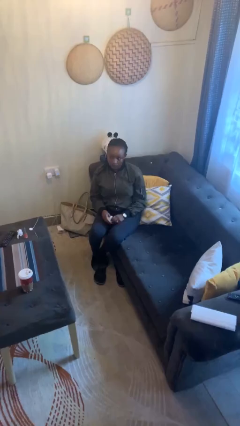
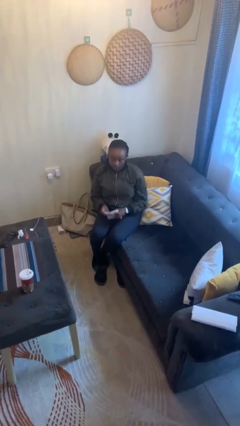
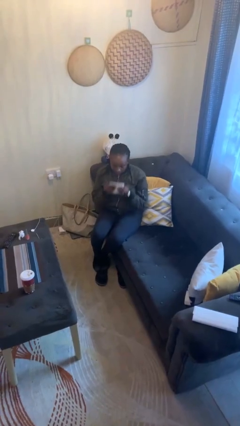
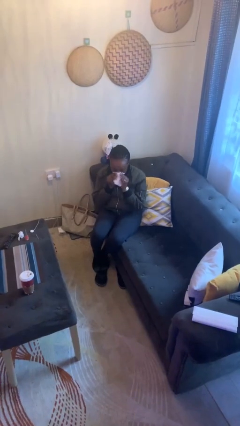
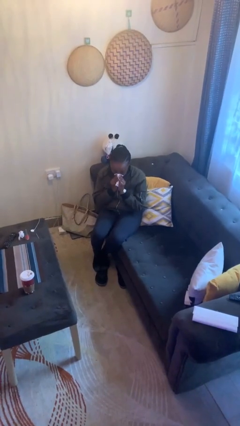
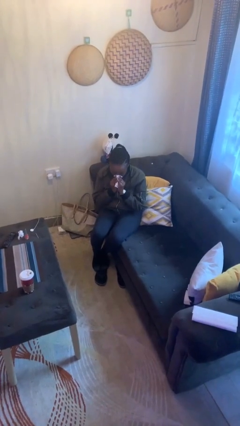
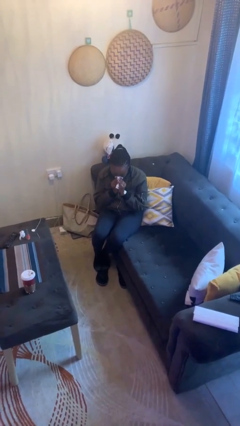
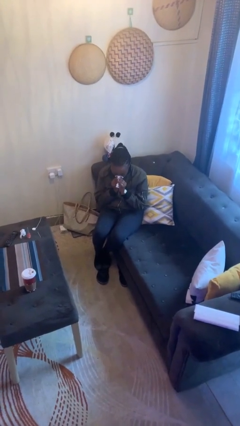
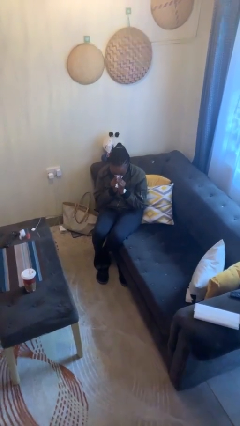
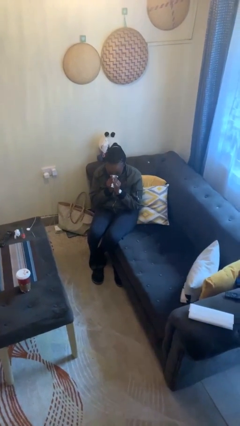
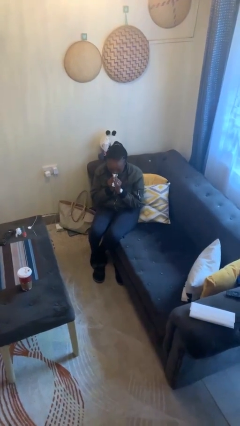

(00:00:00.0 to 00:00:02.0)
person blows nose

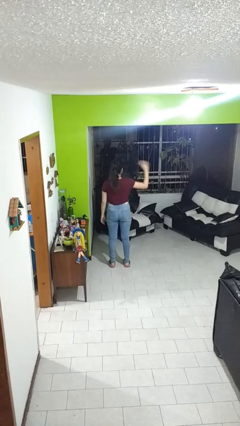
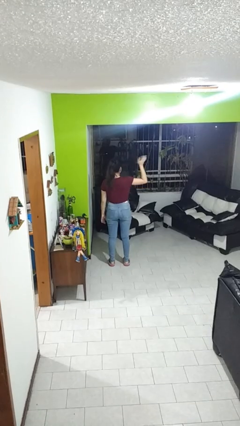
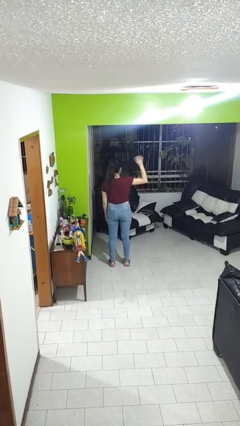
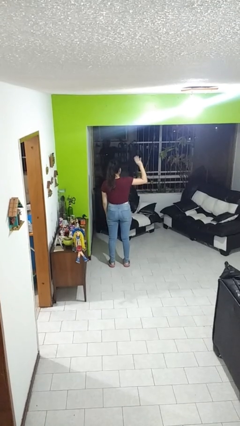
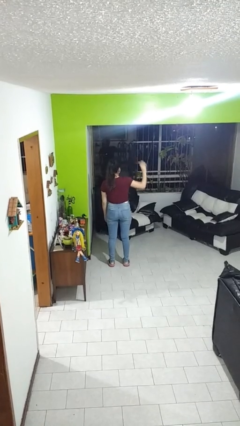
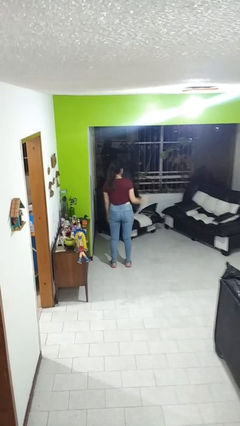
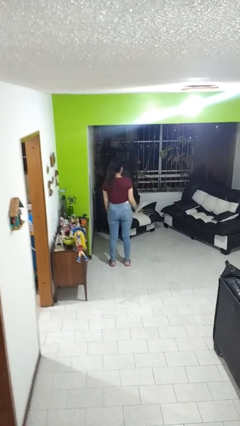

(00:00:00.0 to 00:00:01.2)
person waves at person

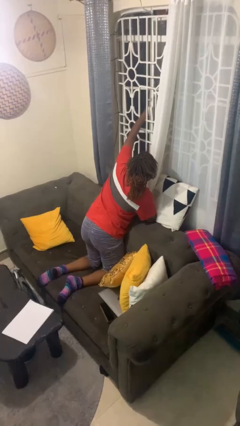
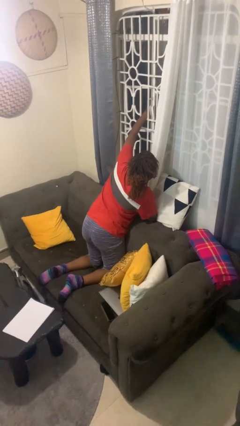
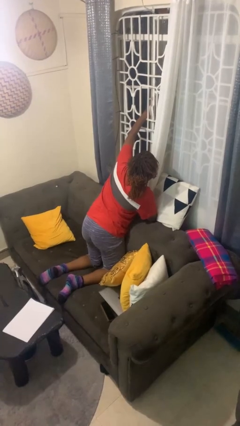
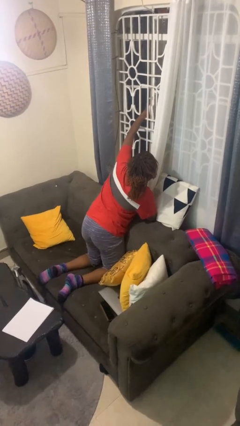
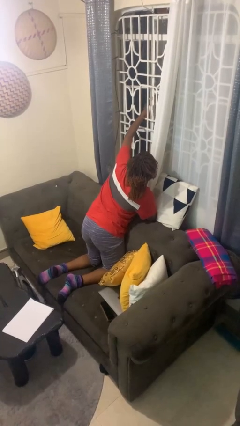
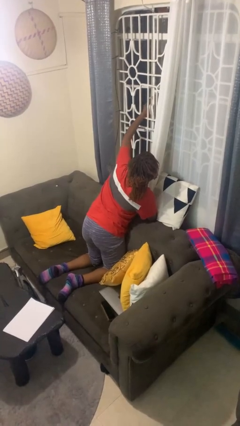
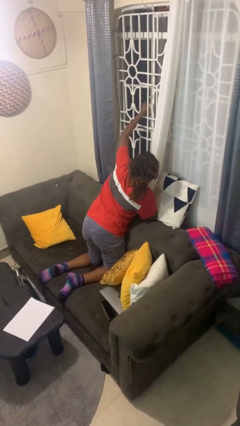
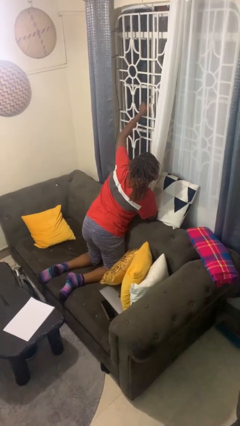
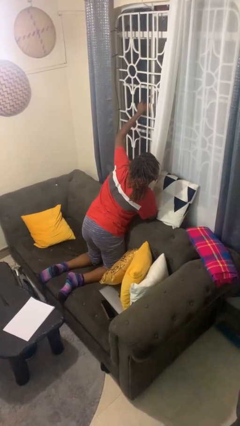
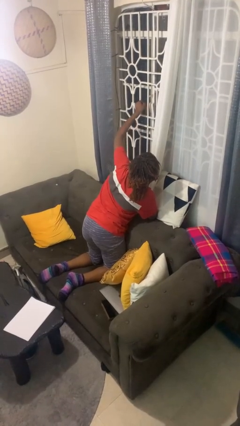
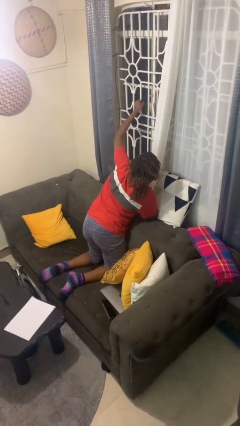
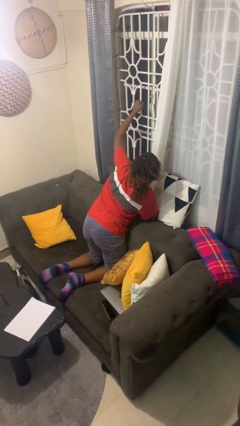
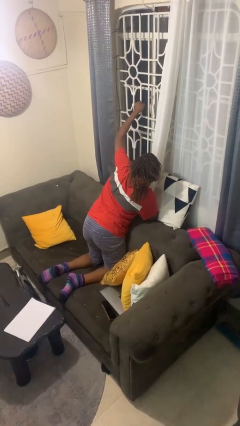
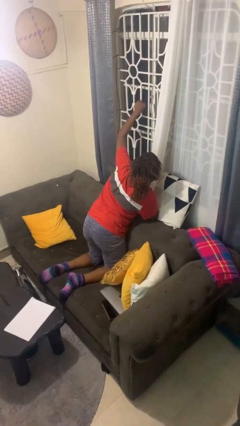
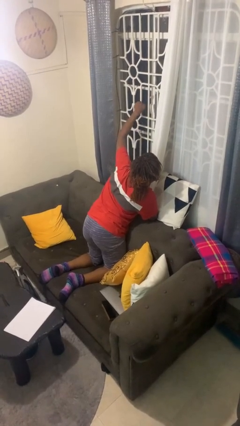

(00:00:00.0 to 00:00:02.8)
person closes home window

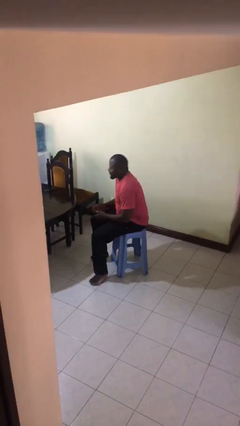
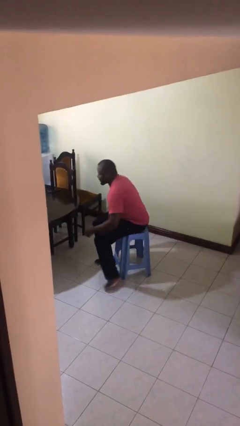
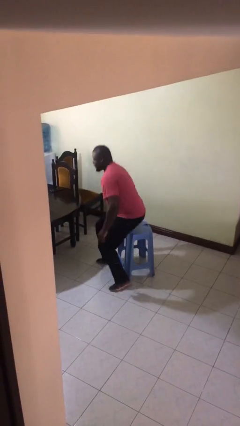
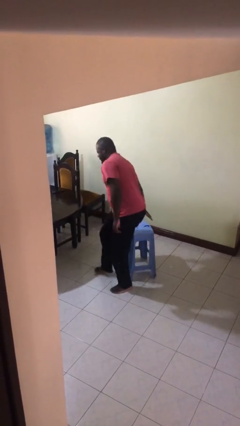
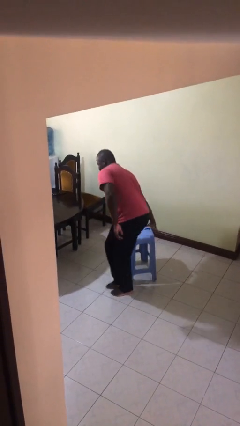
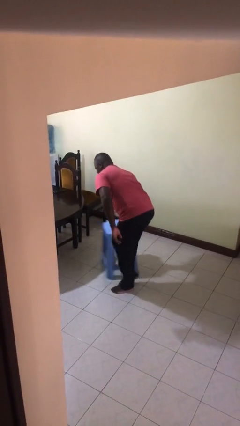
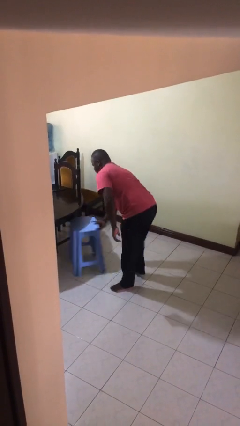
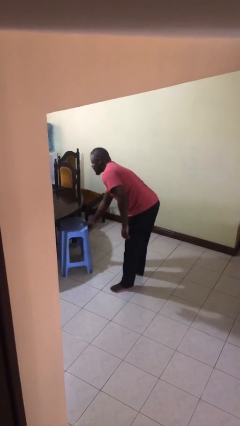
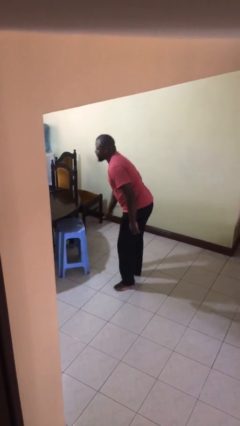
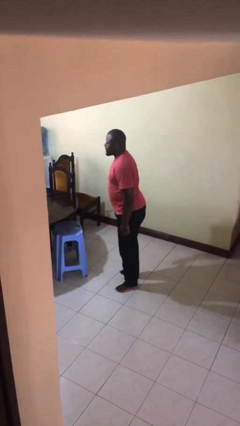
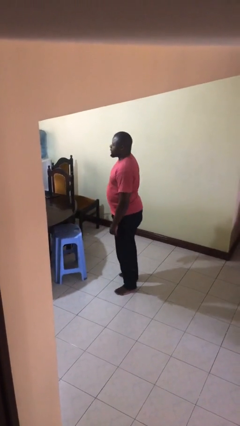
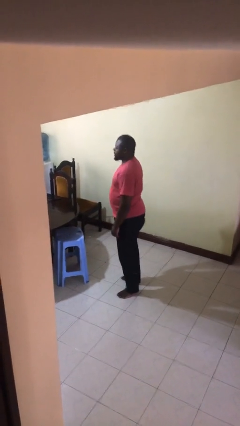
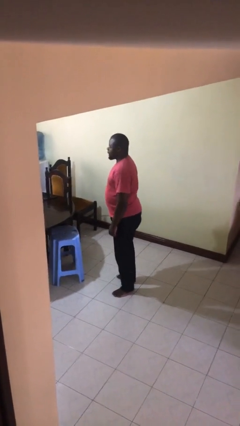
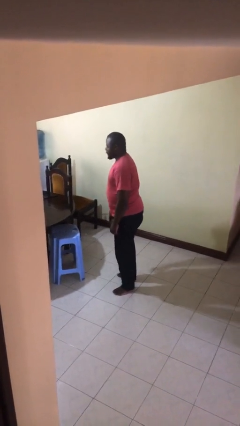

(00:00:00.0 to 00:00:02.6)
person stands up

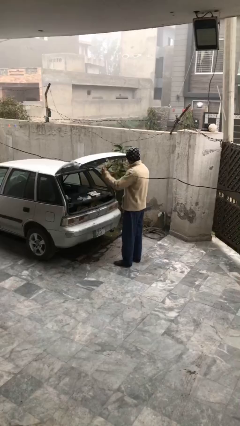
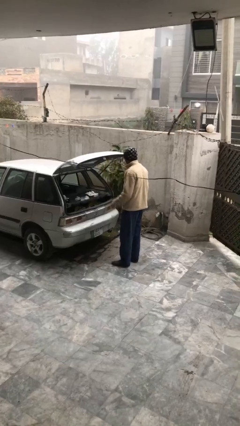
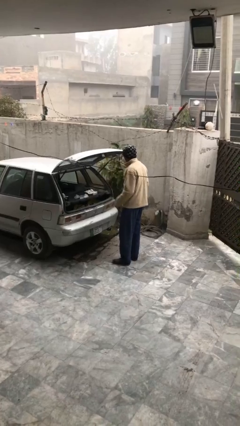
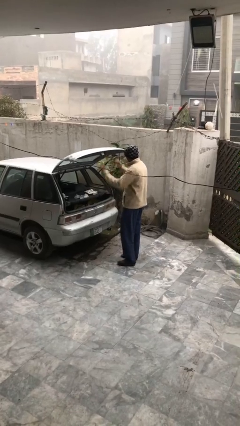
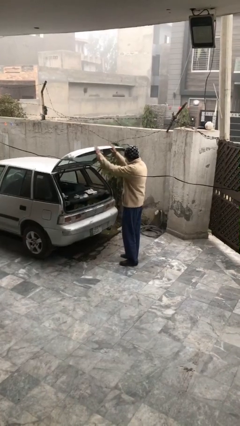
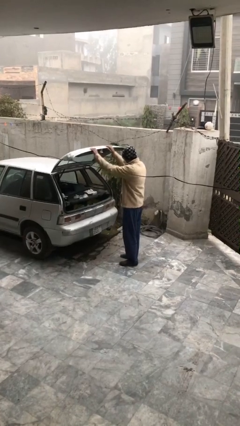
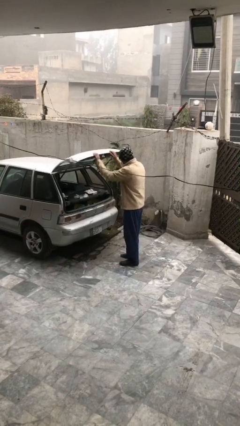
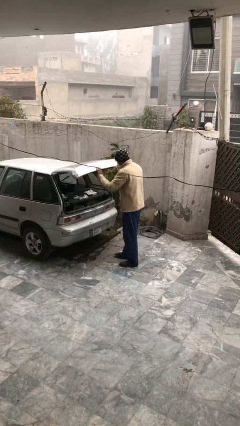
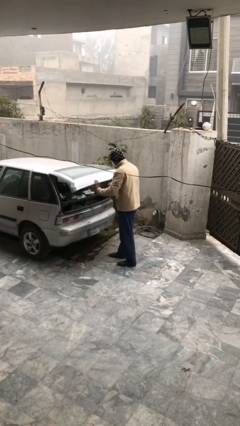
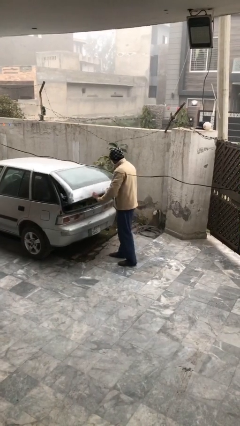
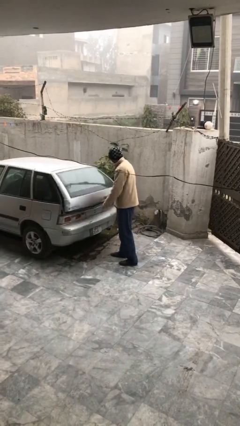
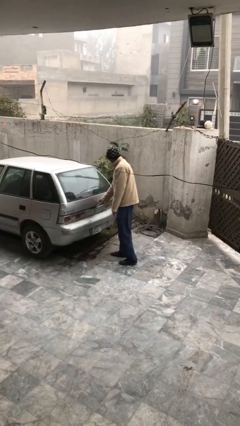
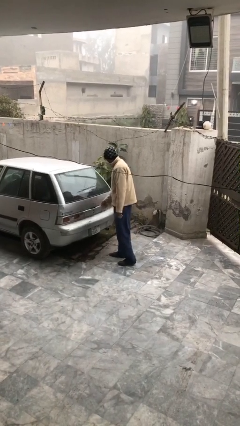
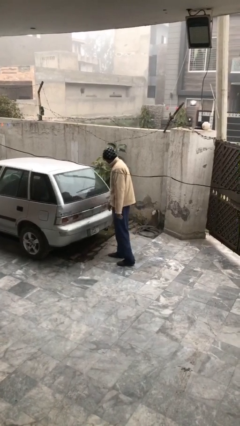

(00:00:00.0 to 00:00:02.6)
person closes car trunk

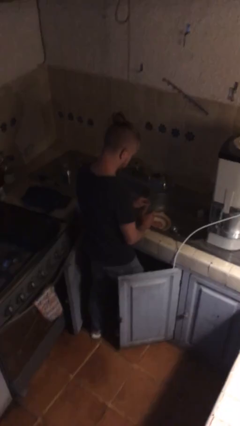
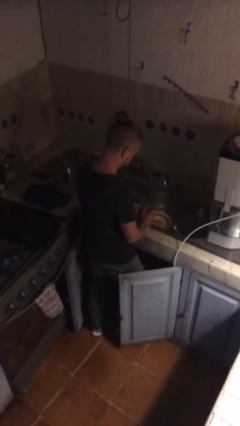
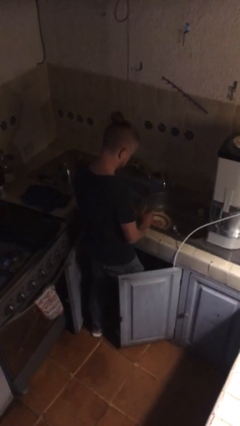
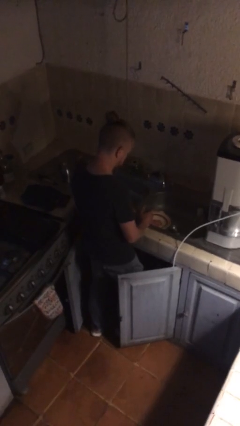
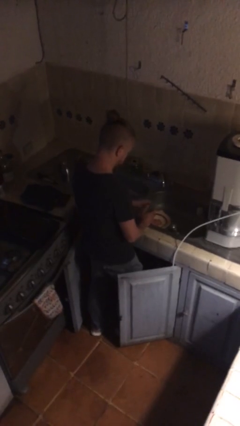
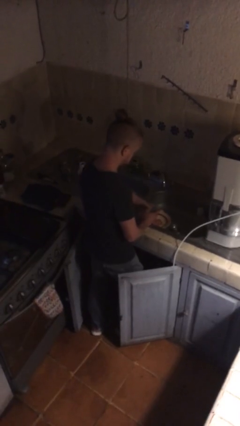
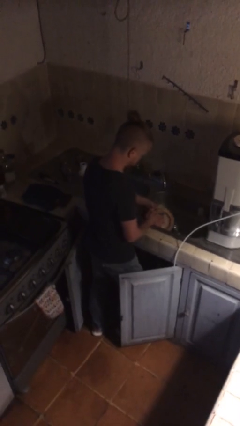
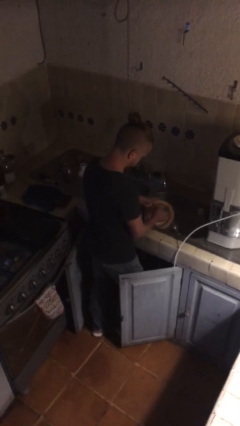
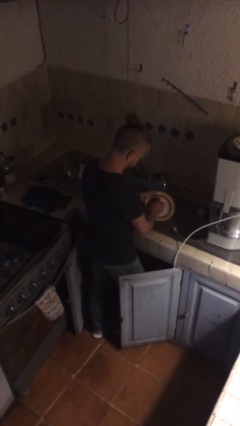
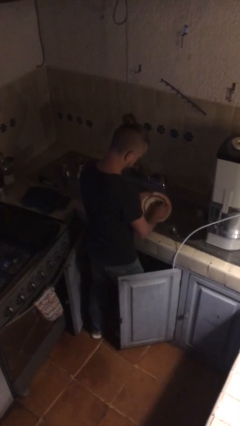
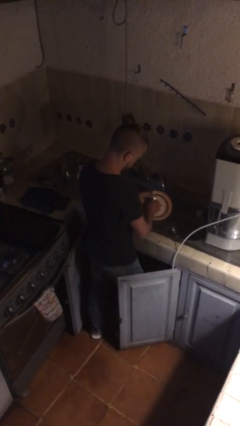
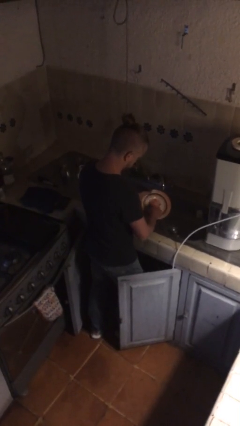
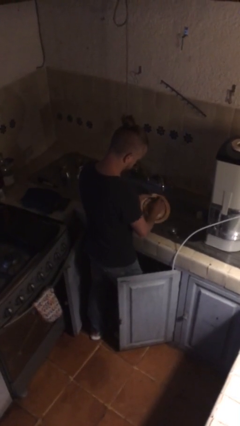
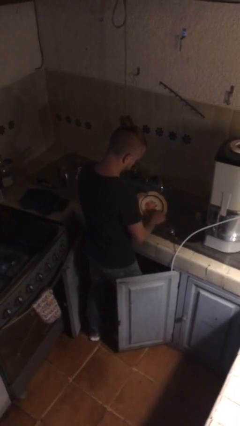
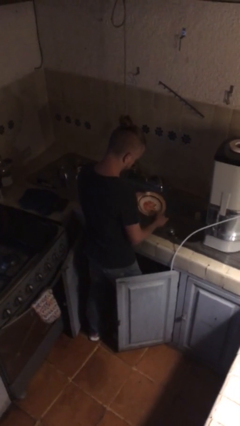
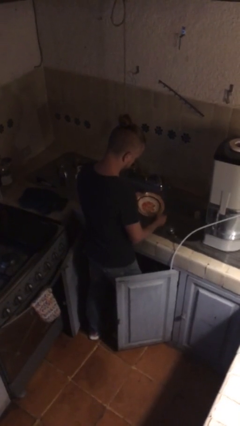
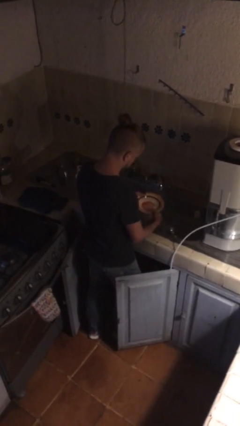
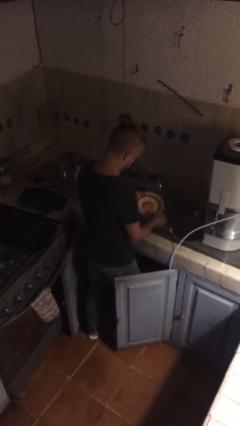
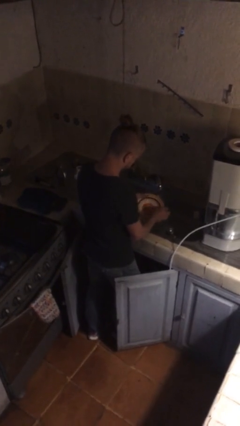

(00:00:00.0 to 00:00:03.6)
person washes dish

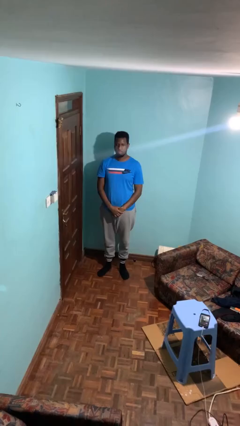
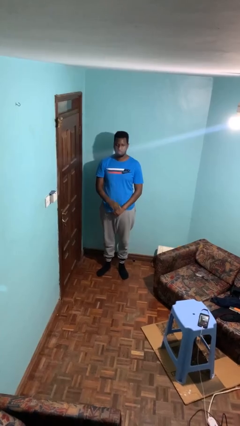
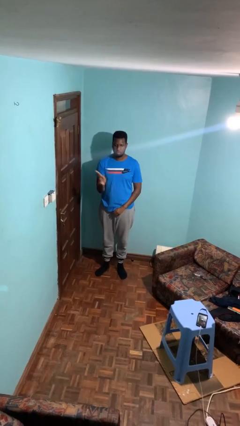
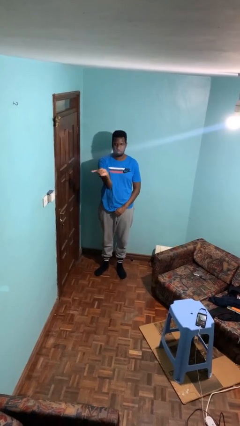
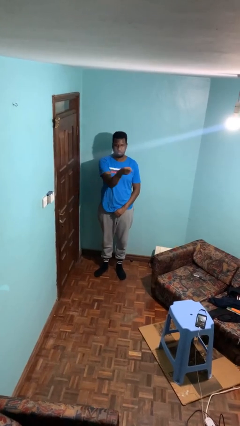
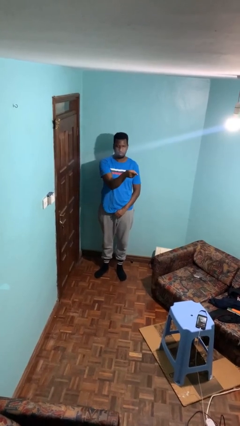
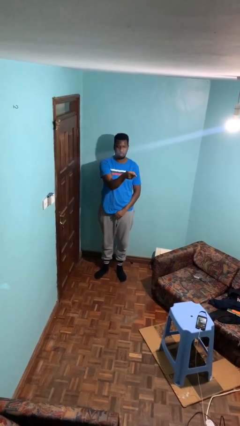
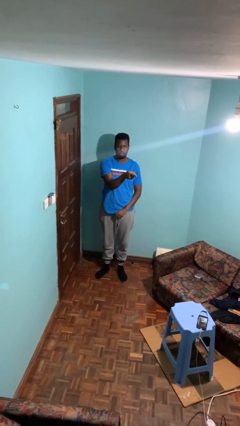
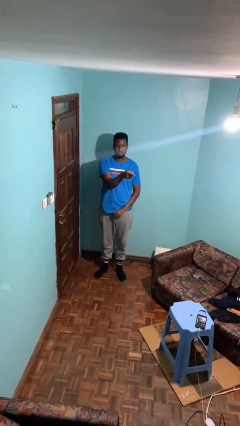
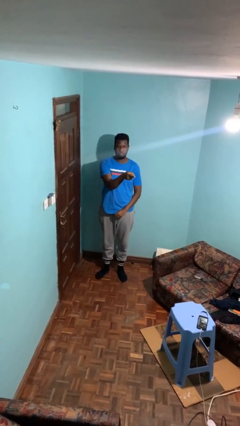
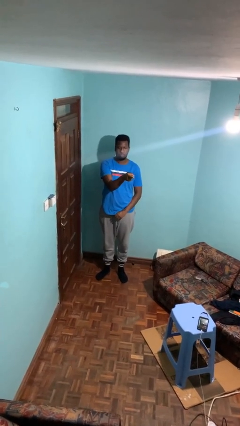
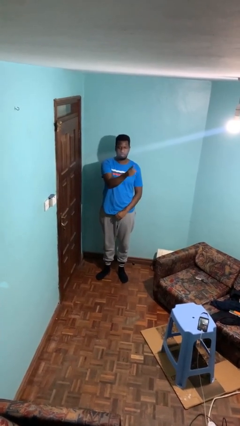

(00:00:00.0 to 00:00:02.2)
person gestures swipe left
